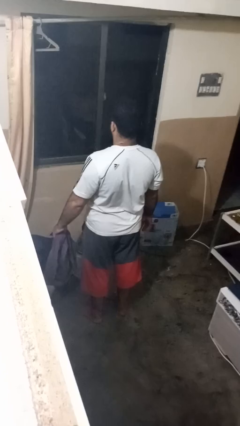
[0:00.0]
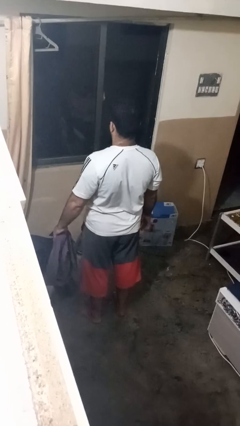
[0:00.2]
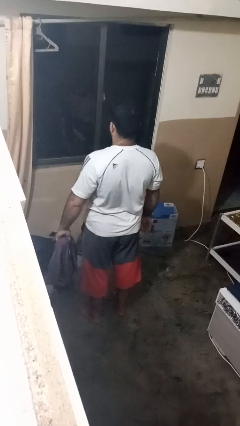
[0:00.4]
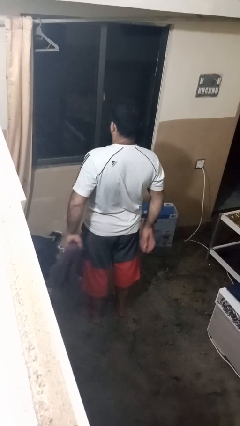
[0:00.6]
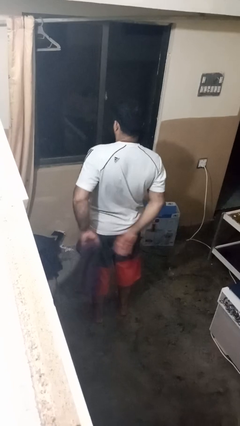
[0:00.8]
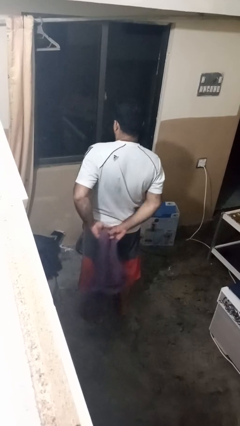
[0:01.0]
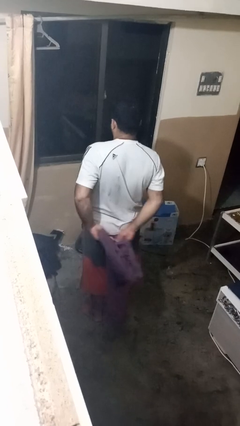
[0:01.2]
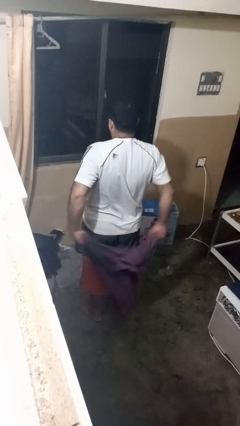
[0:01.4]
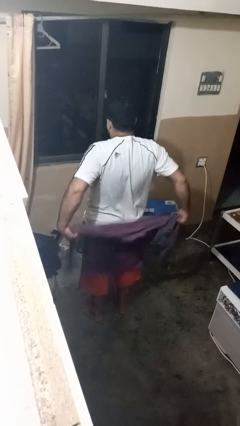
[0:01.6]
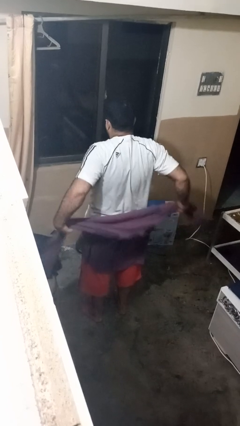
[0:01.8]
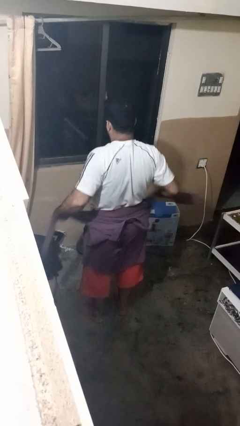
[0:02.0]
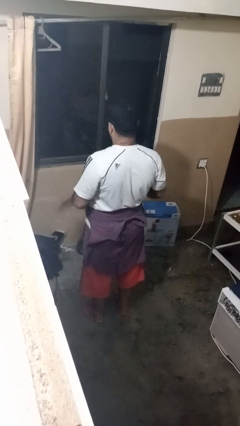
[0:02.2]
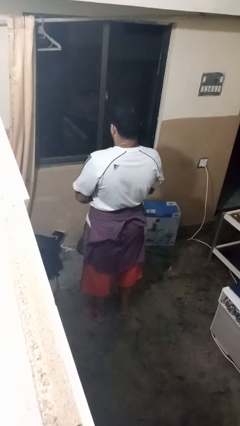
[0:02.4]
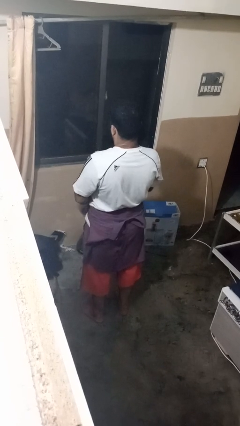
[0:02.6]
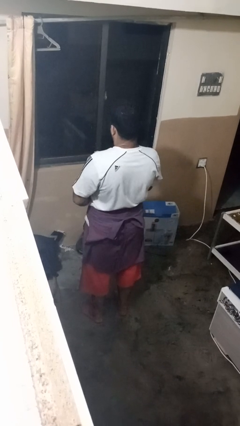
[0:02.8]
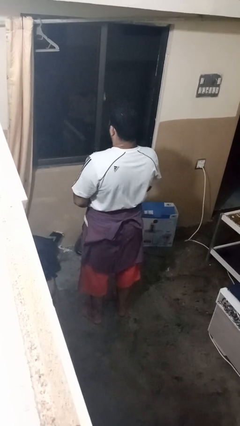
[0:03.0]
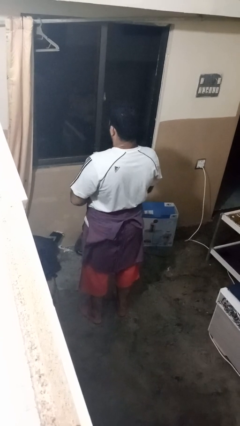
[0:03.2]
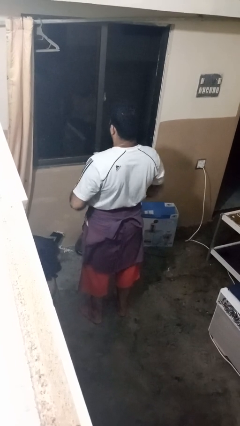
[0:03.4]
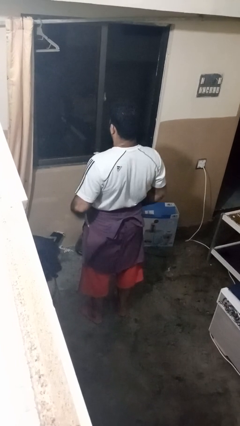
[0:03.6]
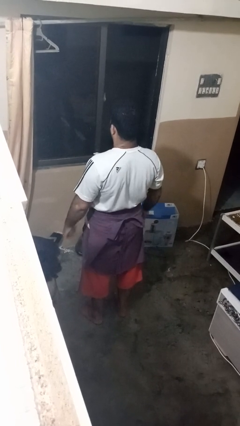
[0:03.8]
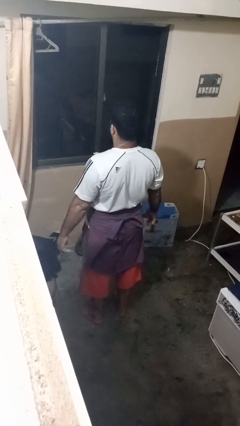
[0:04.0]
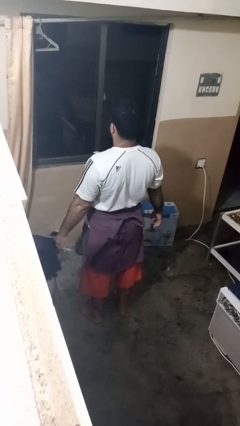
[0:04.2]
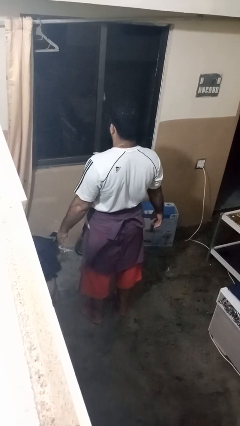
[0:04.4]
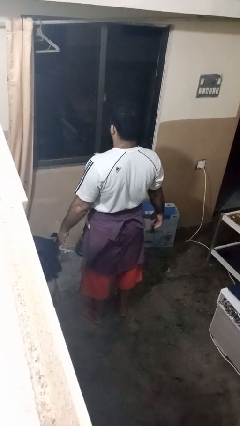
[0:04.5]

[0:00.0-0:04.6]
person ties jacket around waist

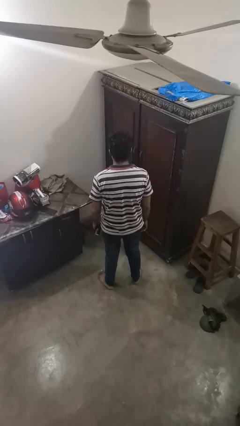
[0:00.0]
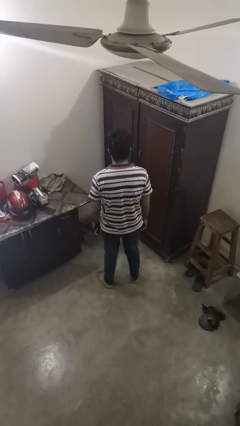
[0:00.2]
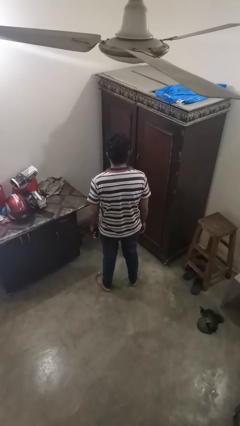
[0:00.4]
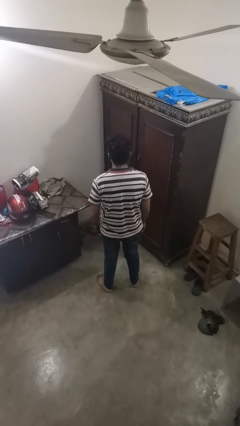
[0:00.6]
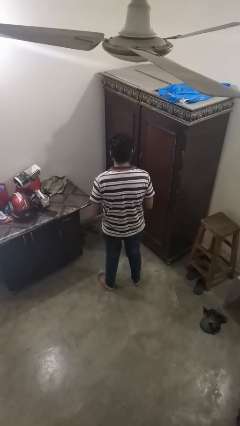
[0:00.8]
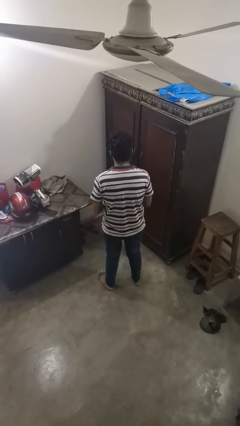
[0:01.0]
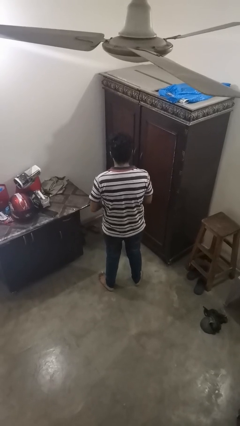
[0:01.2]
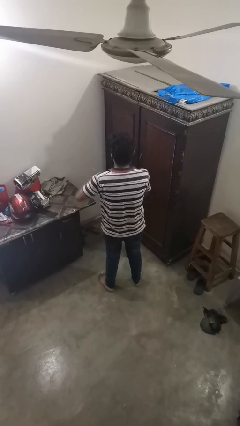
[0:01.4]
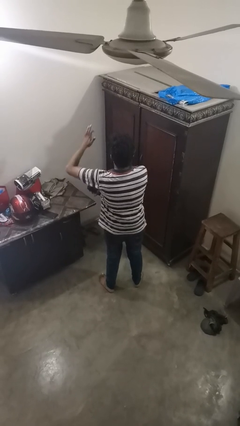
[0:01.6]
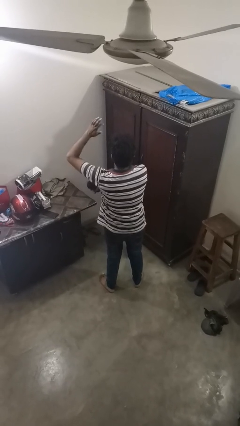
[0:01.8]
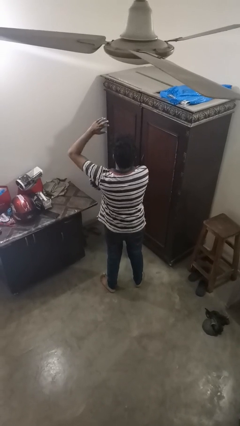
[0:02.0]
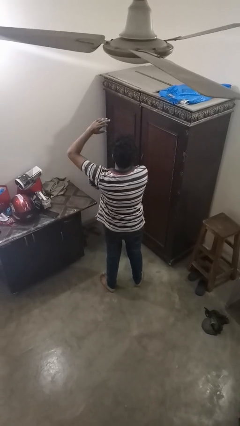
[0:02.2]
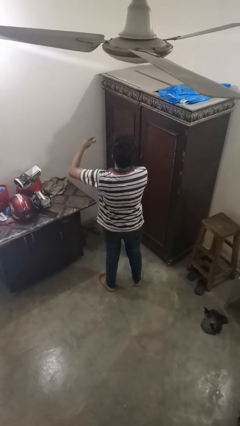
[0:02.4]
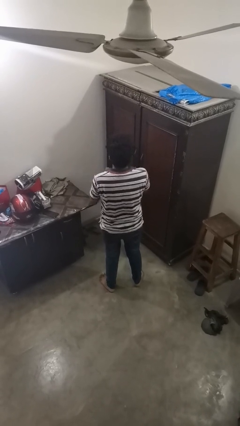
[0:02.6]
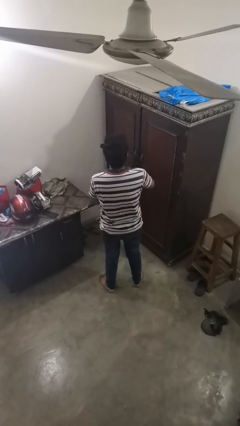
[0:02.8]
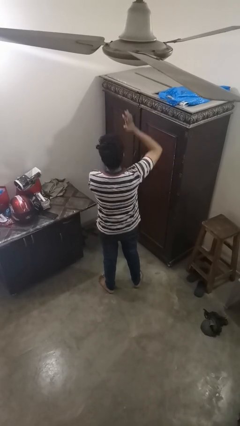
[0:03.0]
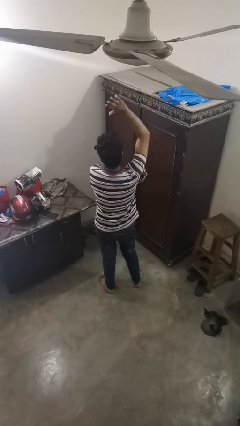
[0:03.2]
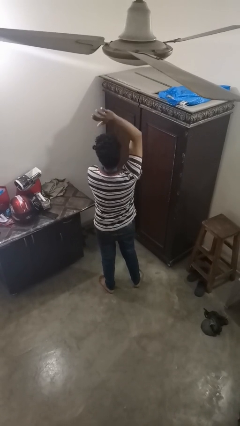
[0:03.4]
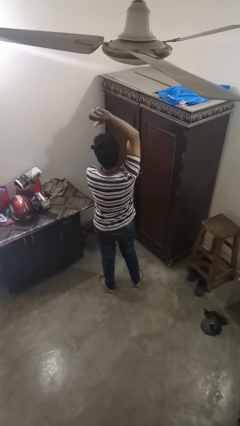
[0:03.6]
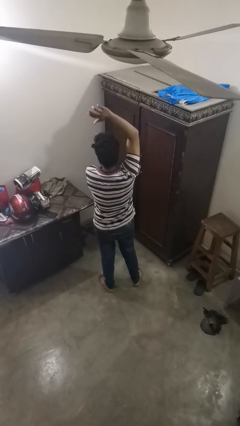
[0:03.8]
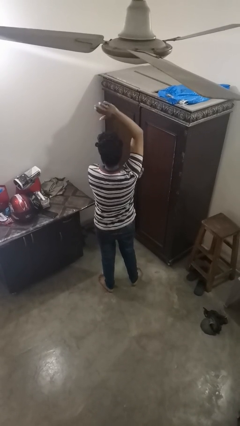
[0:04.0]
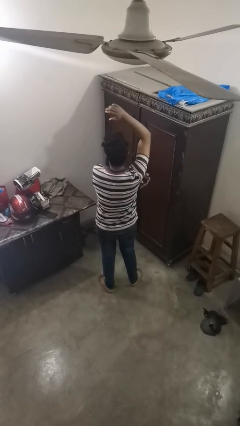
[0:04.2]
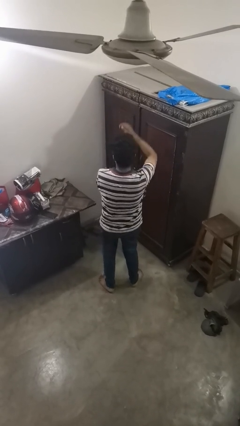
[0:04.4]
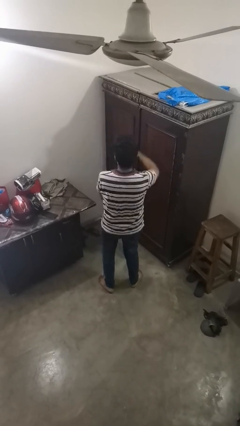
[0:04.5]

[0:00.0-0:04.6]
person applies deodorant

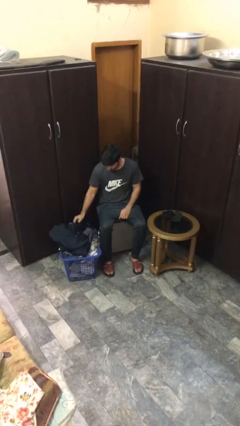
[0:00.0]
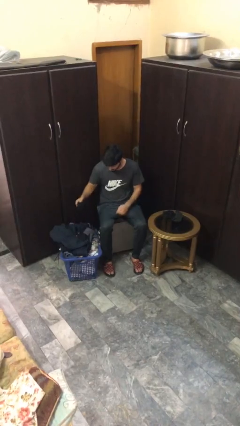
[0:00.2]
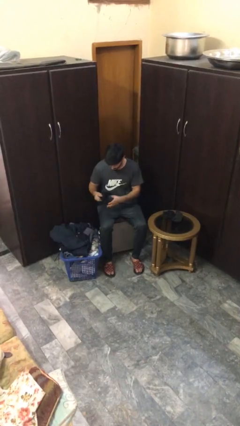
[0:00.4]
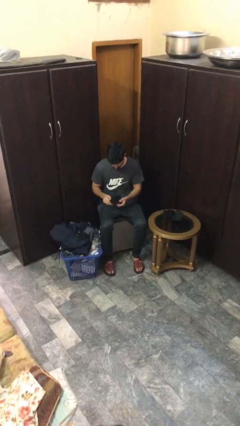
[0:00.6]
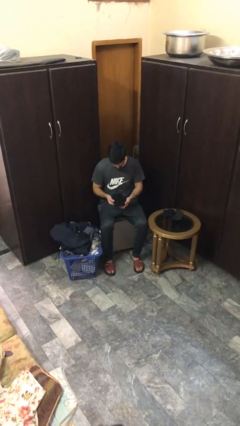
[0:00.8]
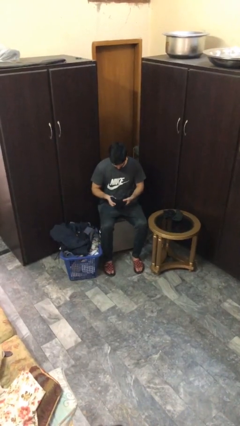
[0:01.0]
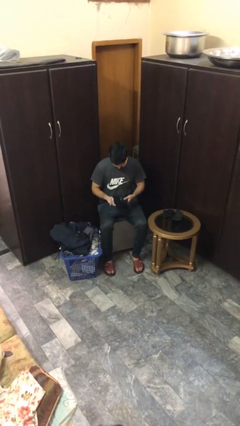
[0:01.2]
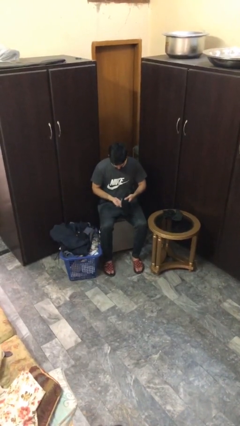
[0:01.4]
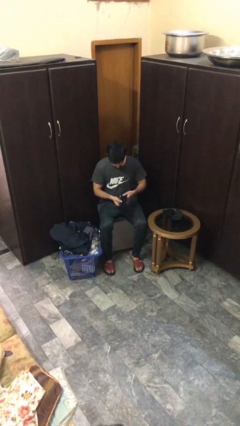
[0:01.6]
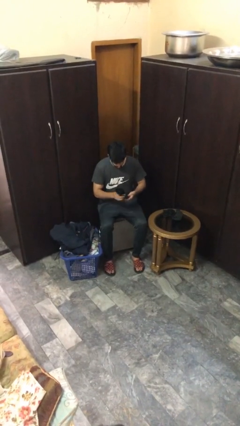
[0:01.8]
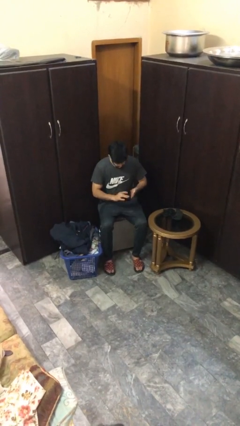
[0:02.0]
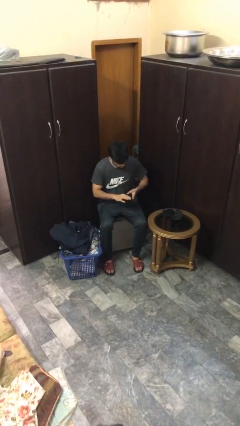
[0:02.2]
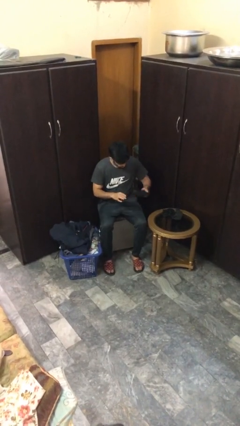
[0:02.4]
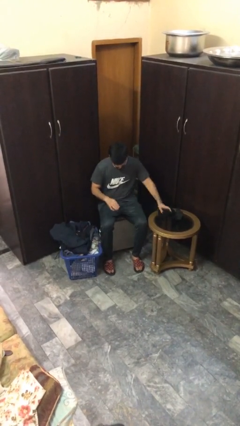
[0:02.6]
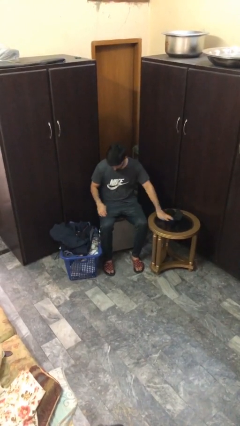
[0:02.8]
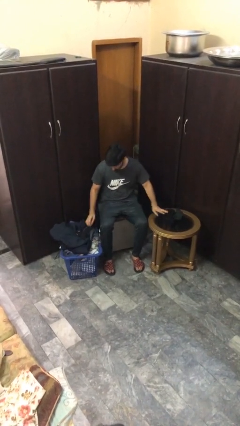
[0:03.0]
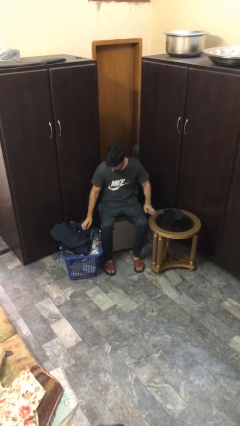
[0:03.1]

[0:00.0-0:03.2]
person folds socks

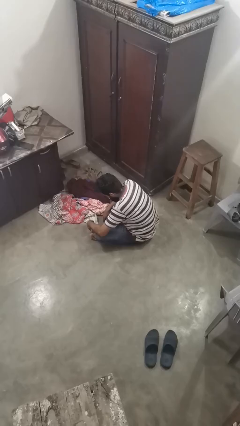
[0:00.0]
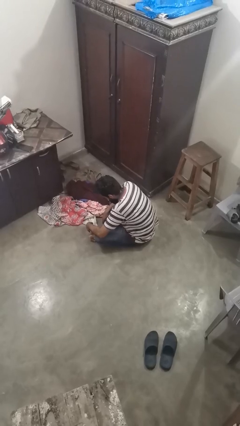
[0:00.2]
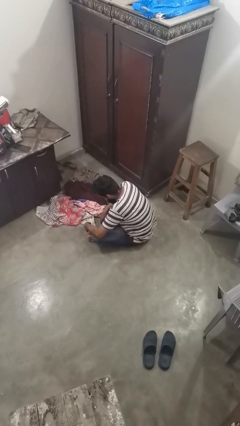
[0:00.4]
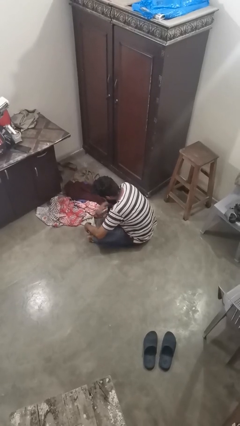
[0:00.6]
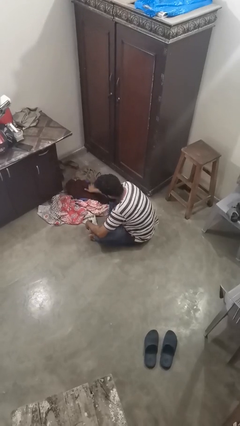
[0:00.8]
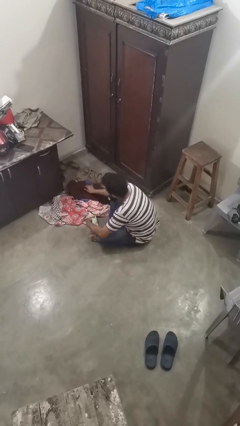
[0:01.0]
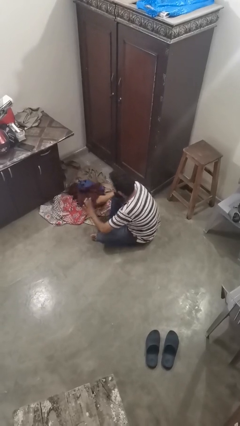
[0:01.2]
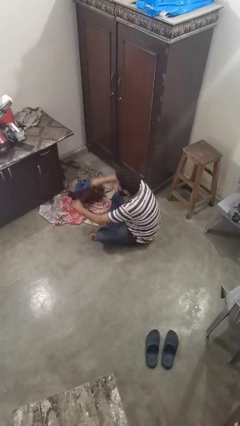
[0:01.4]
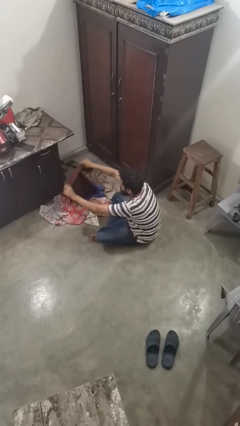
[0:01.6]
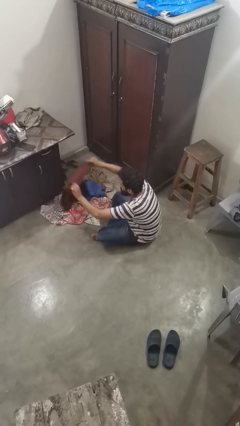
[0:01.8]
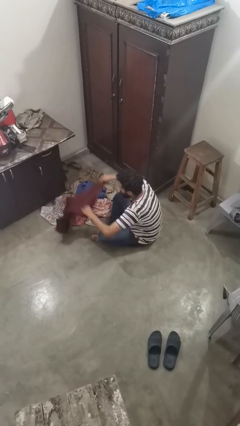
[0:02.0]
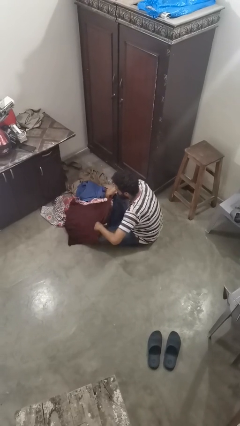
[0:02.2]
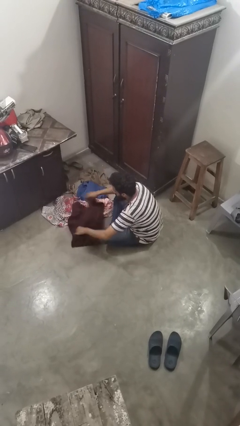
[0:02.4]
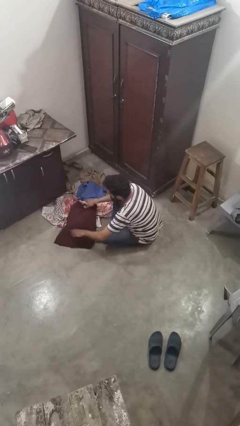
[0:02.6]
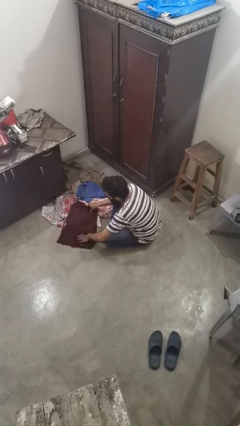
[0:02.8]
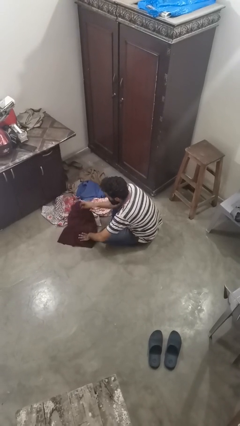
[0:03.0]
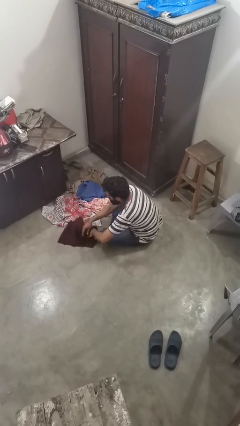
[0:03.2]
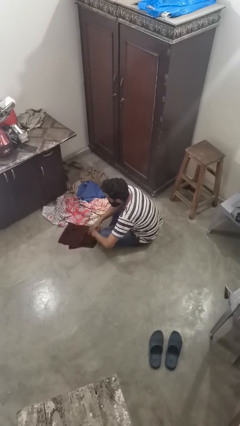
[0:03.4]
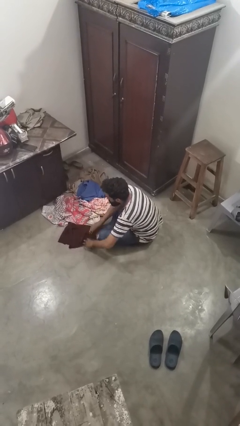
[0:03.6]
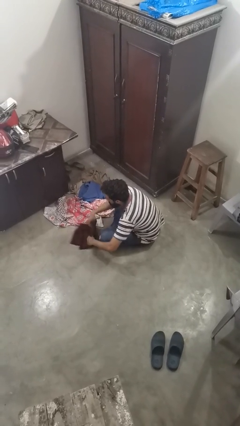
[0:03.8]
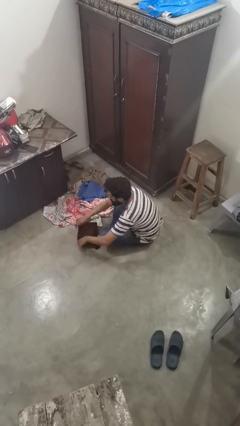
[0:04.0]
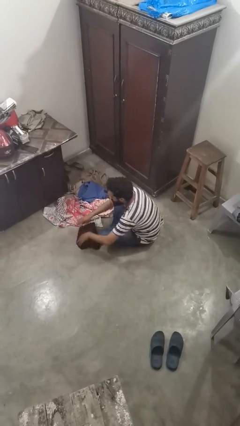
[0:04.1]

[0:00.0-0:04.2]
person folds shirt

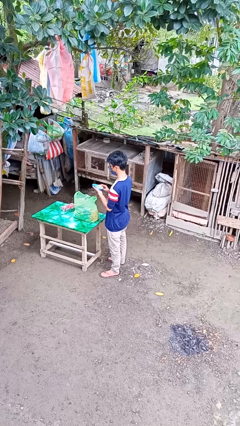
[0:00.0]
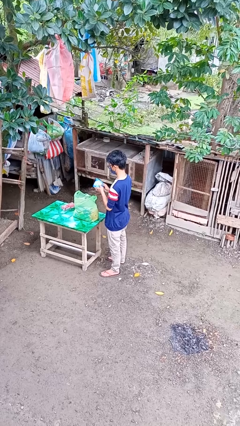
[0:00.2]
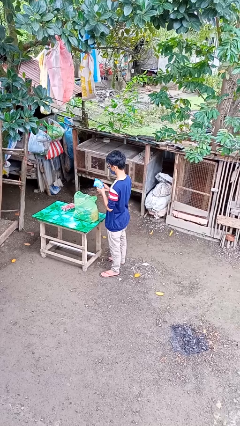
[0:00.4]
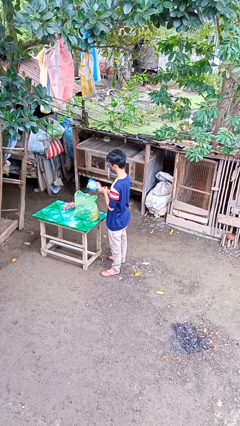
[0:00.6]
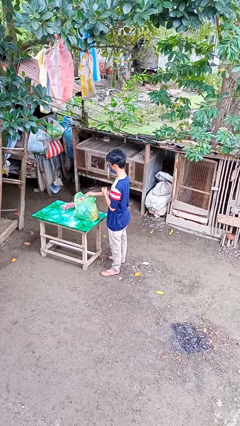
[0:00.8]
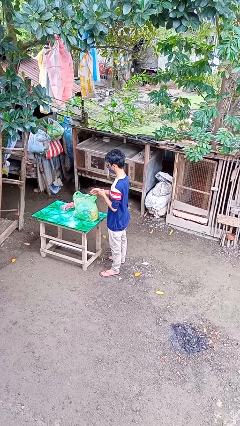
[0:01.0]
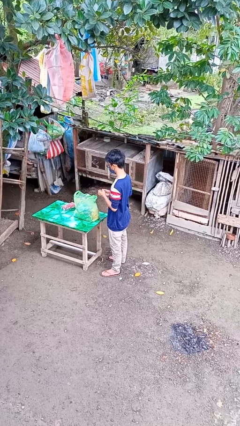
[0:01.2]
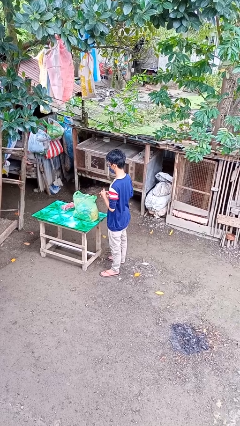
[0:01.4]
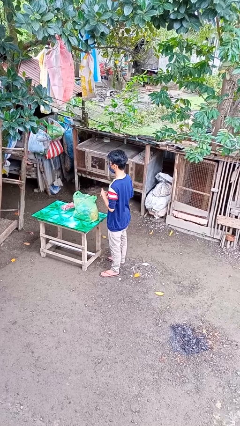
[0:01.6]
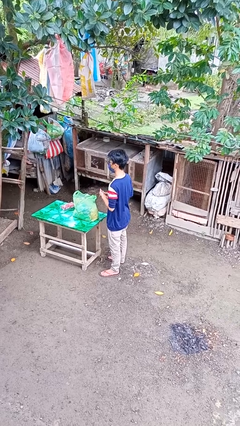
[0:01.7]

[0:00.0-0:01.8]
person puts object into bag
